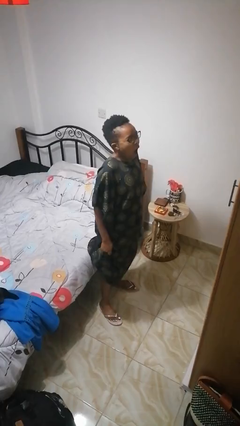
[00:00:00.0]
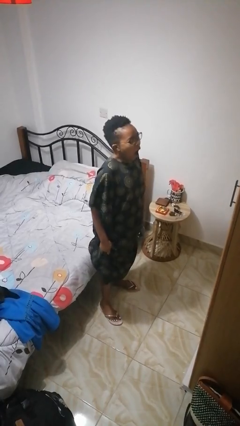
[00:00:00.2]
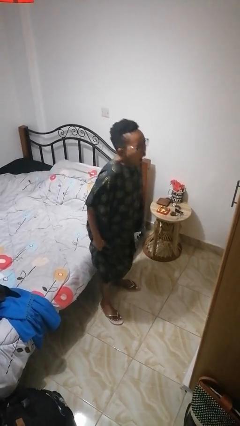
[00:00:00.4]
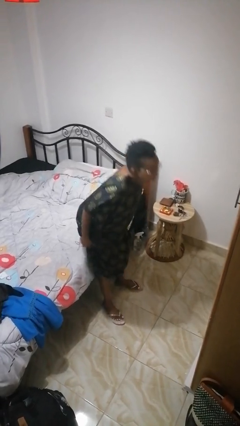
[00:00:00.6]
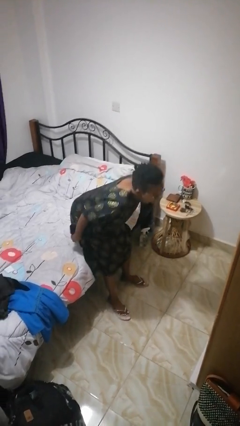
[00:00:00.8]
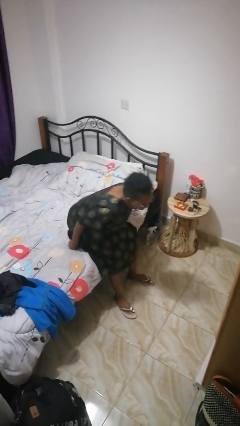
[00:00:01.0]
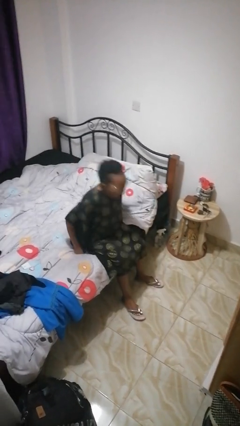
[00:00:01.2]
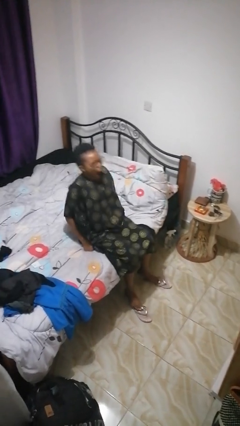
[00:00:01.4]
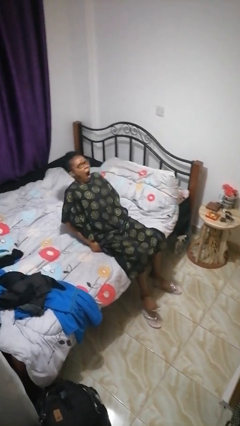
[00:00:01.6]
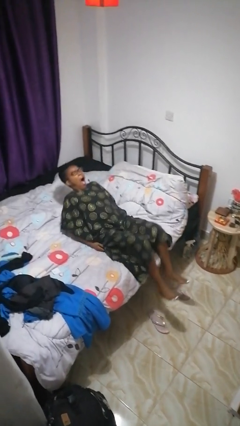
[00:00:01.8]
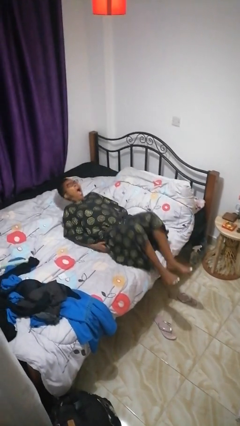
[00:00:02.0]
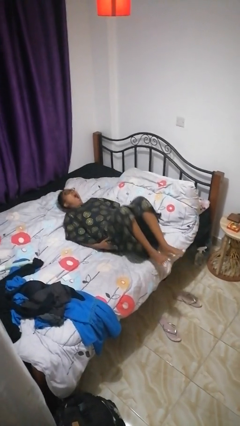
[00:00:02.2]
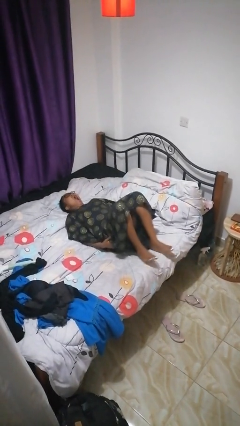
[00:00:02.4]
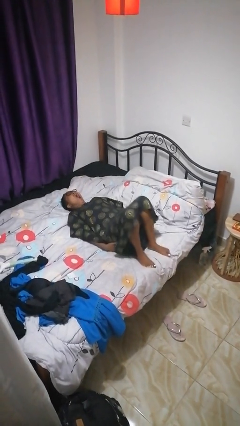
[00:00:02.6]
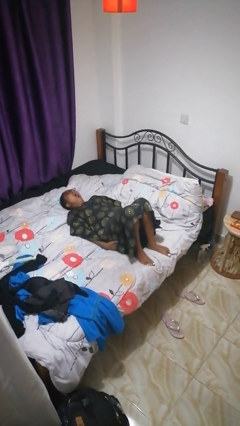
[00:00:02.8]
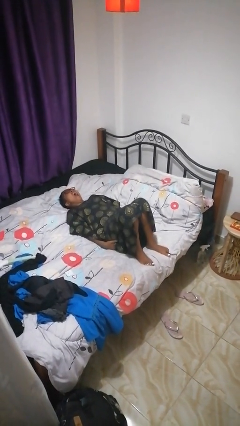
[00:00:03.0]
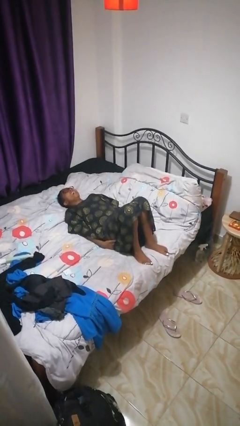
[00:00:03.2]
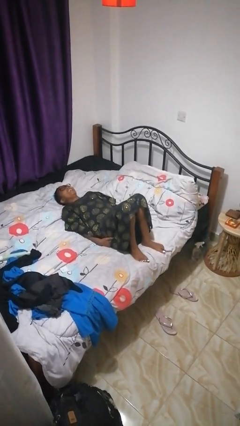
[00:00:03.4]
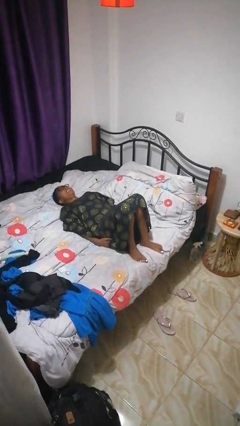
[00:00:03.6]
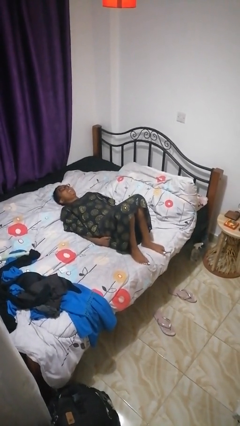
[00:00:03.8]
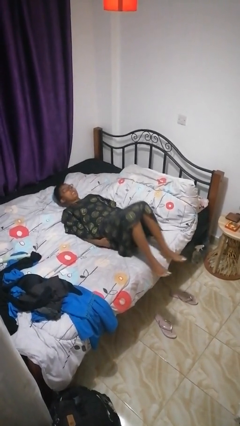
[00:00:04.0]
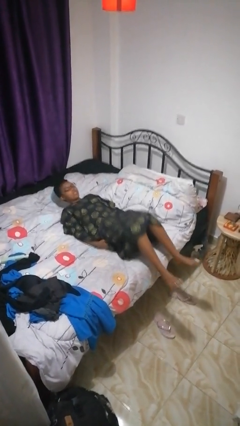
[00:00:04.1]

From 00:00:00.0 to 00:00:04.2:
person lies down on bed

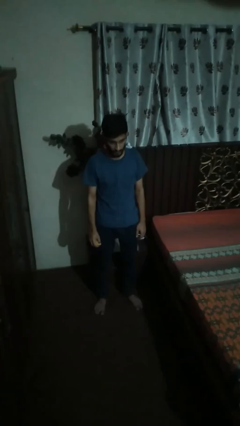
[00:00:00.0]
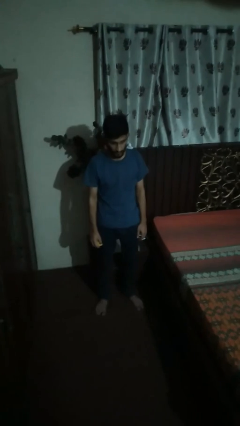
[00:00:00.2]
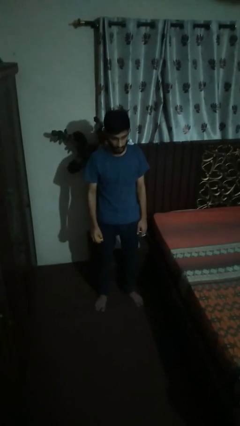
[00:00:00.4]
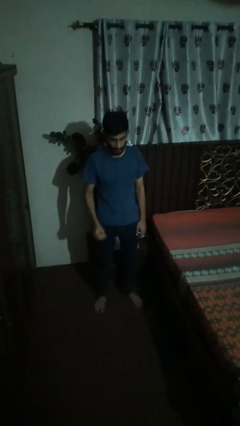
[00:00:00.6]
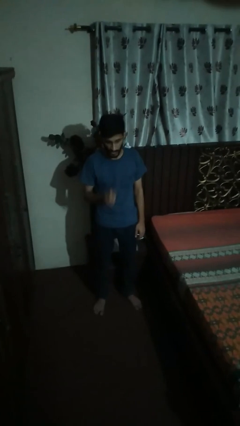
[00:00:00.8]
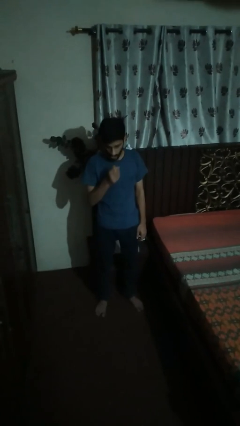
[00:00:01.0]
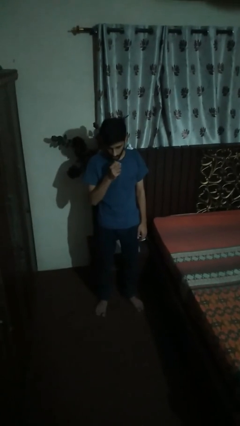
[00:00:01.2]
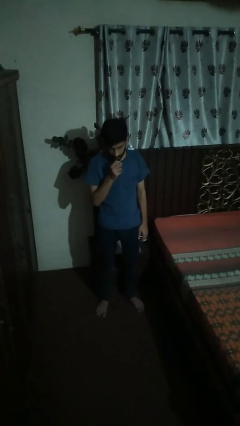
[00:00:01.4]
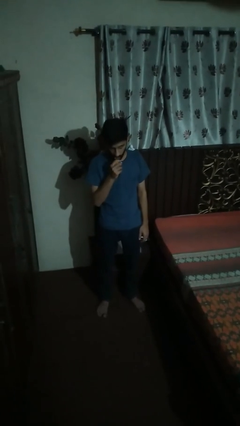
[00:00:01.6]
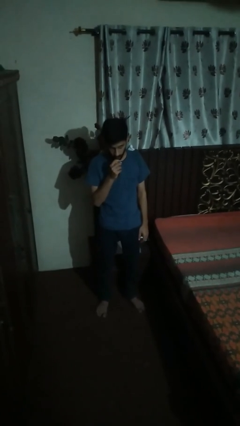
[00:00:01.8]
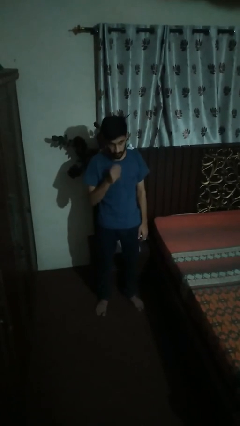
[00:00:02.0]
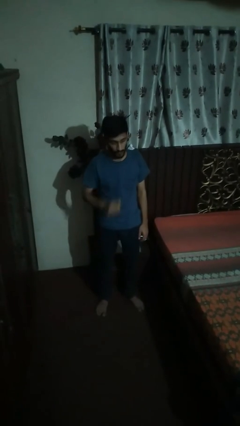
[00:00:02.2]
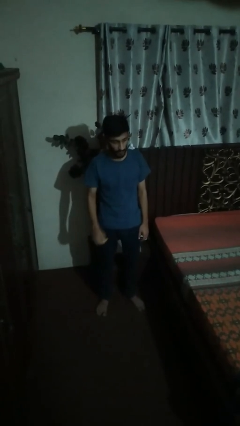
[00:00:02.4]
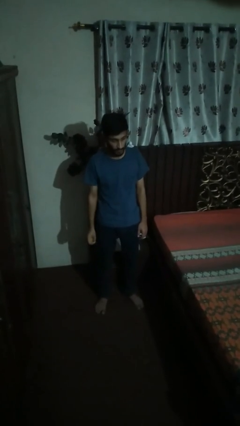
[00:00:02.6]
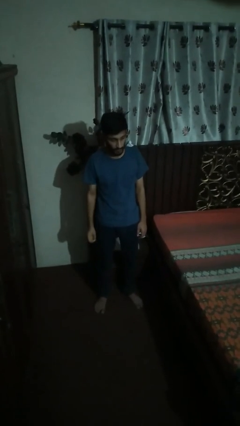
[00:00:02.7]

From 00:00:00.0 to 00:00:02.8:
person eats banana

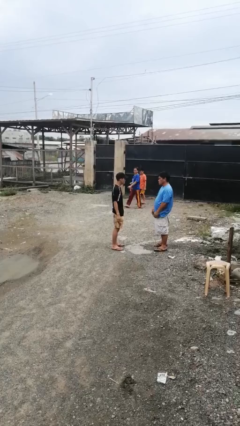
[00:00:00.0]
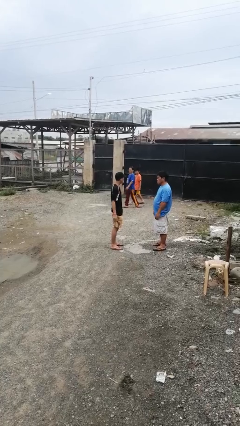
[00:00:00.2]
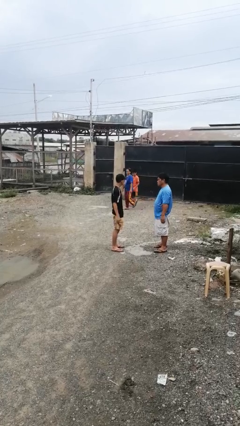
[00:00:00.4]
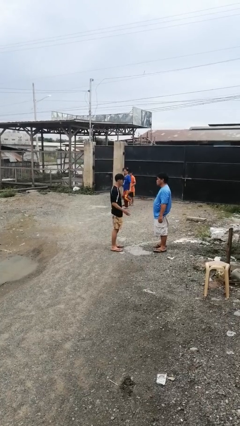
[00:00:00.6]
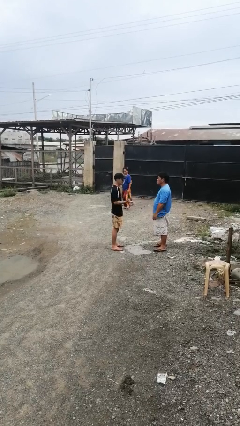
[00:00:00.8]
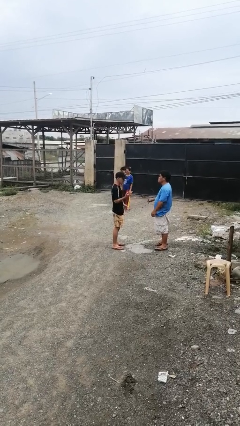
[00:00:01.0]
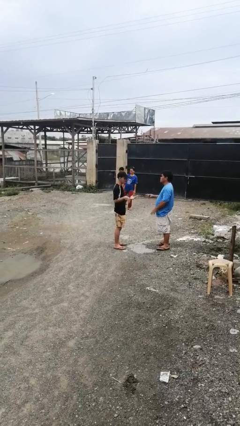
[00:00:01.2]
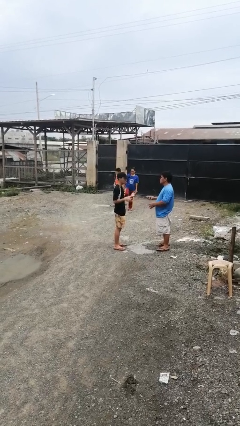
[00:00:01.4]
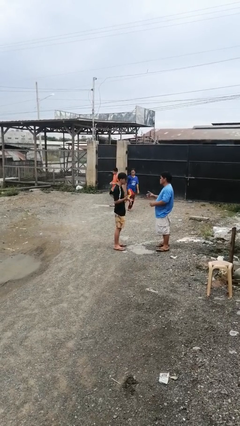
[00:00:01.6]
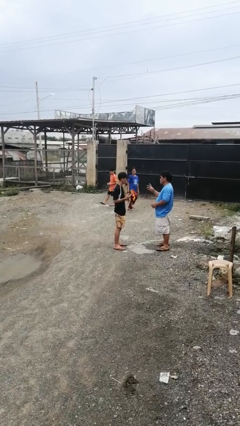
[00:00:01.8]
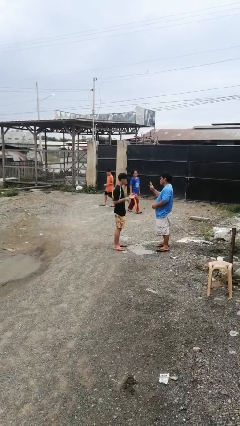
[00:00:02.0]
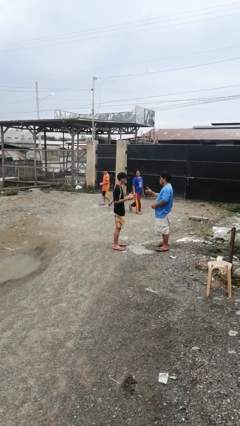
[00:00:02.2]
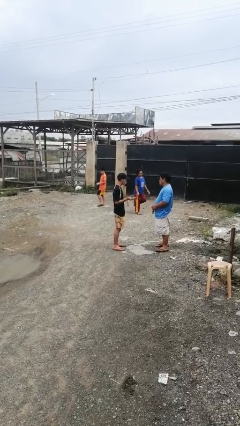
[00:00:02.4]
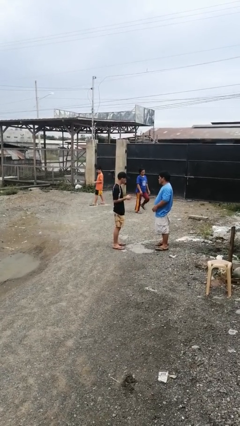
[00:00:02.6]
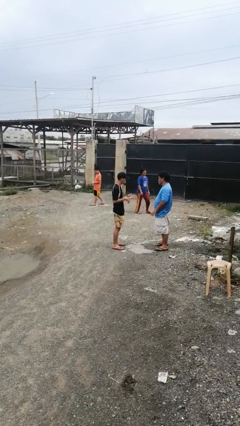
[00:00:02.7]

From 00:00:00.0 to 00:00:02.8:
person talks to person

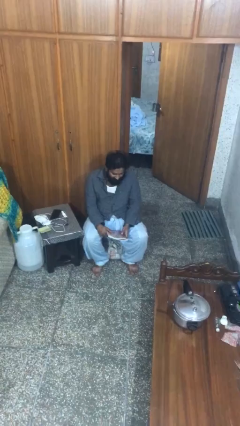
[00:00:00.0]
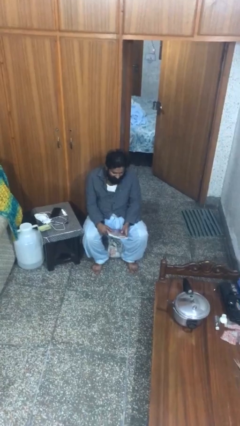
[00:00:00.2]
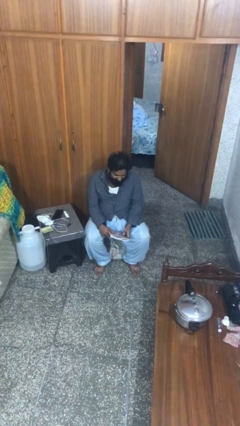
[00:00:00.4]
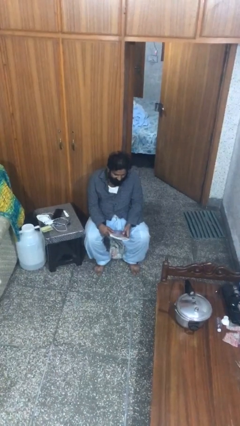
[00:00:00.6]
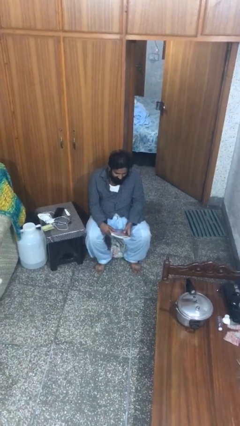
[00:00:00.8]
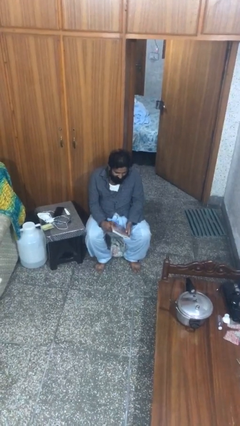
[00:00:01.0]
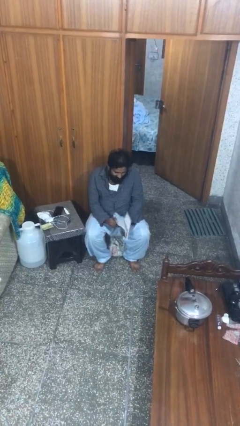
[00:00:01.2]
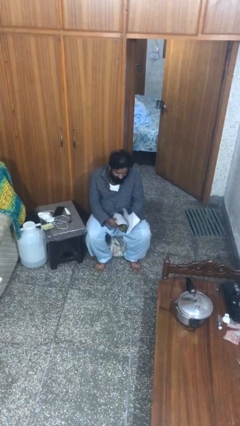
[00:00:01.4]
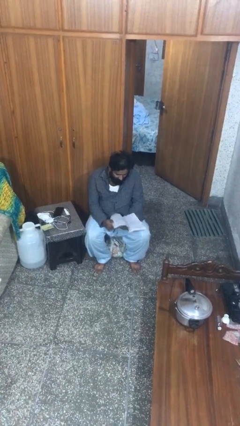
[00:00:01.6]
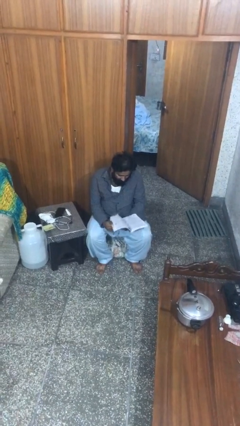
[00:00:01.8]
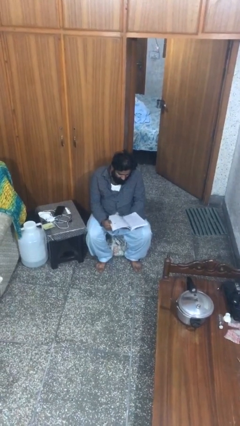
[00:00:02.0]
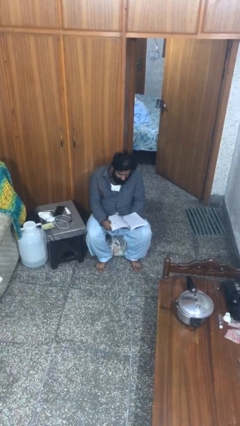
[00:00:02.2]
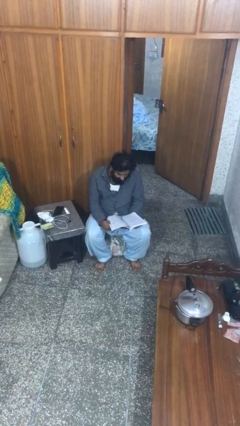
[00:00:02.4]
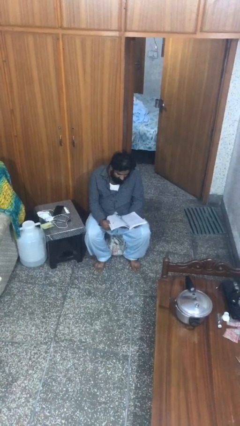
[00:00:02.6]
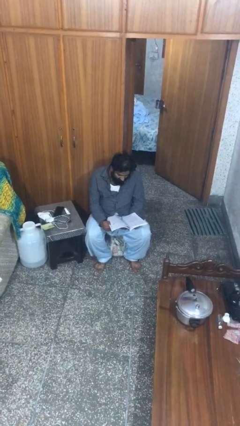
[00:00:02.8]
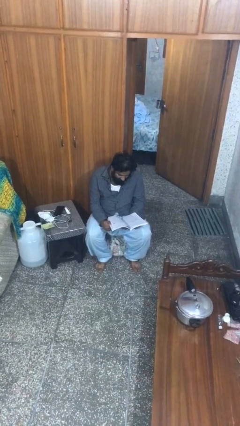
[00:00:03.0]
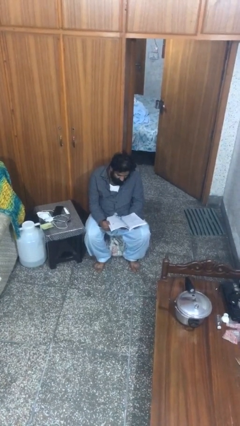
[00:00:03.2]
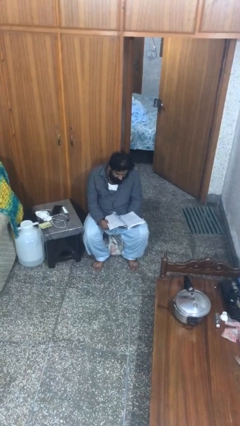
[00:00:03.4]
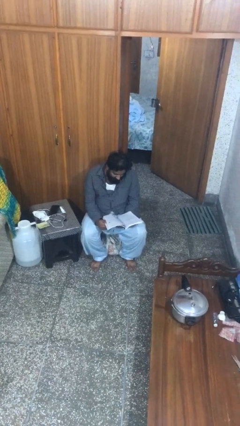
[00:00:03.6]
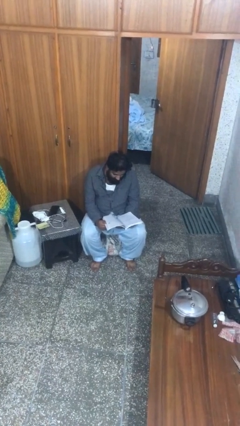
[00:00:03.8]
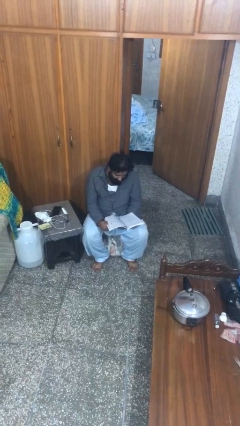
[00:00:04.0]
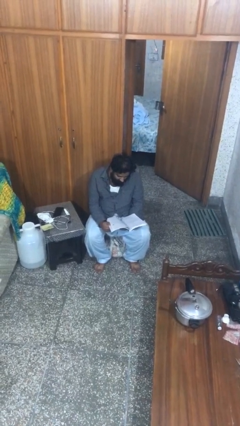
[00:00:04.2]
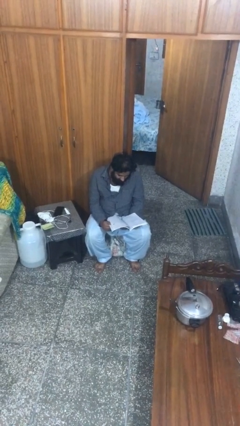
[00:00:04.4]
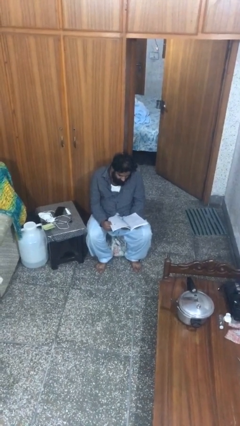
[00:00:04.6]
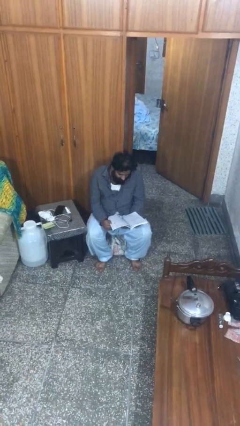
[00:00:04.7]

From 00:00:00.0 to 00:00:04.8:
person reads document

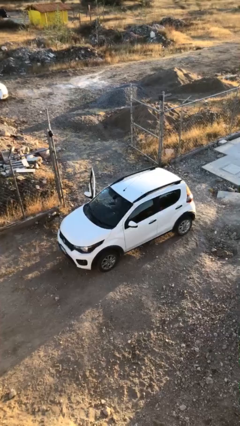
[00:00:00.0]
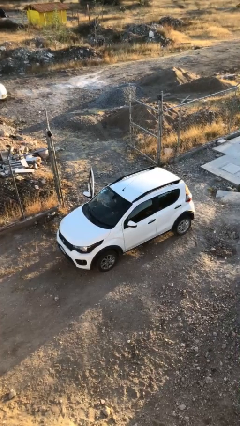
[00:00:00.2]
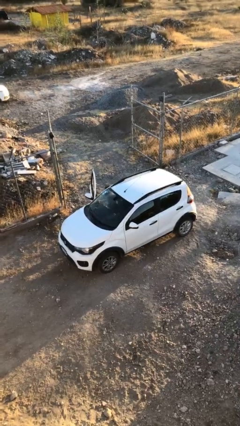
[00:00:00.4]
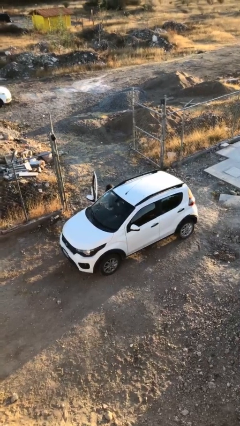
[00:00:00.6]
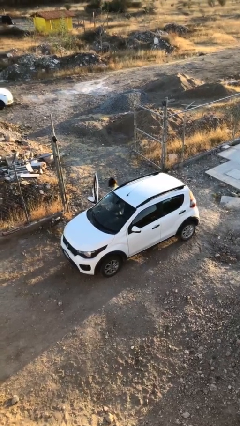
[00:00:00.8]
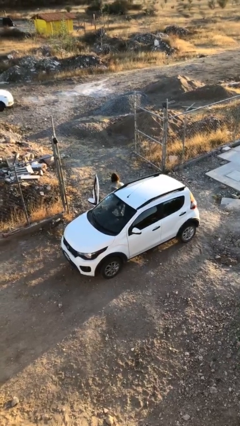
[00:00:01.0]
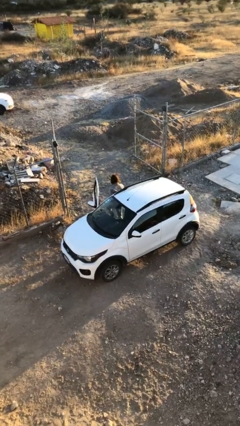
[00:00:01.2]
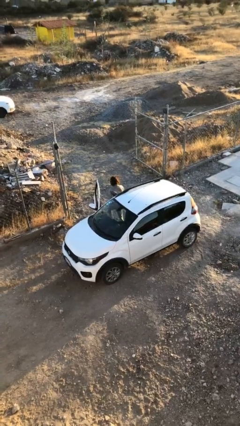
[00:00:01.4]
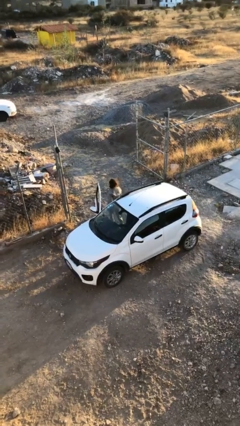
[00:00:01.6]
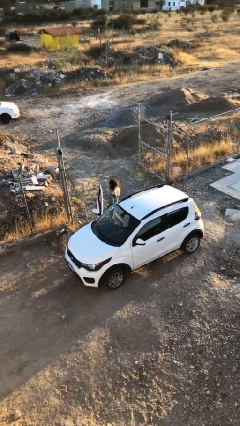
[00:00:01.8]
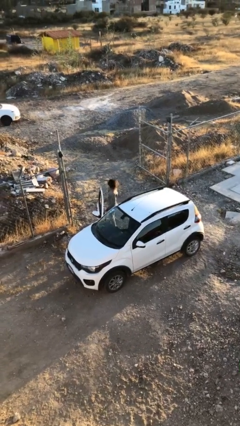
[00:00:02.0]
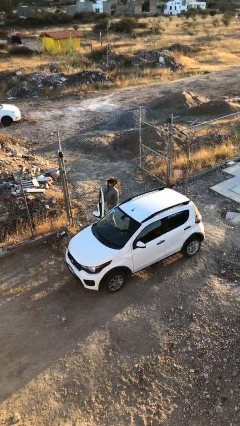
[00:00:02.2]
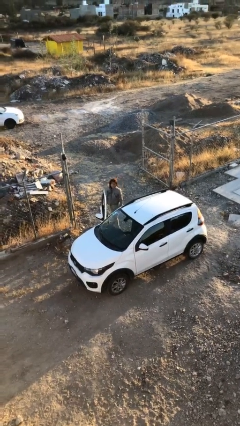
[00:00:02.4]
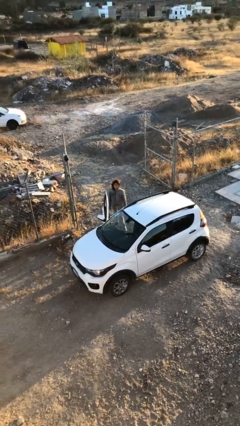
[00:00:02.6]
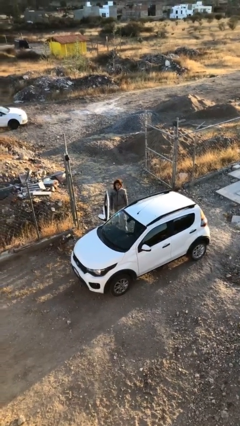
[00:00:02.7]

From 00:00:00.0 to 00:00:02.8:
person exits car
